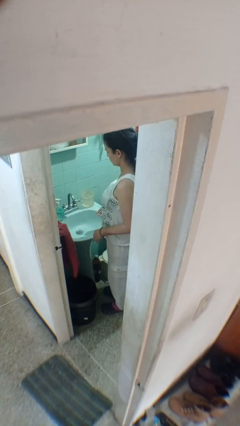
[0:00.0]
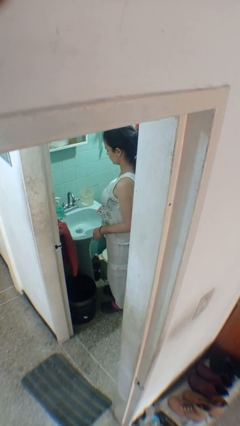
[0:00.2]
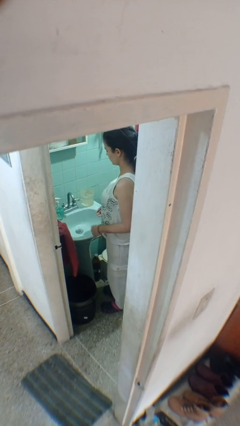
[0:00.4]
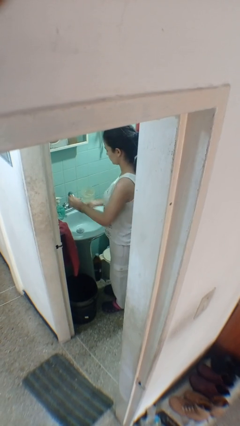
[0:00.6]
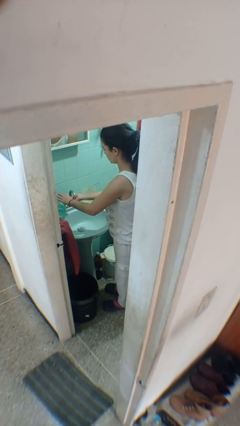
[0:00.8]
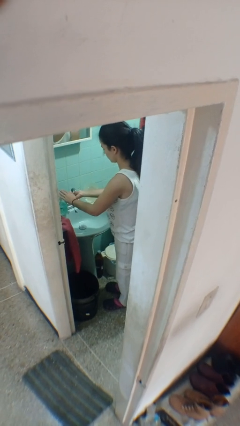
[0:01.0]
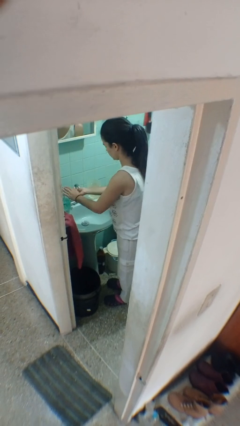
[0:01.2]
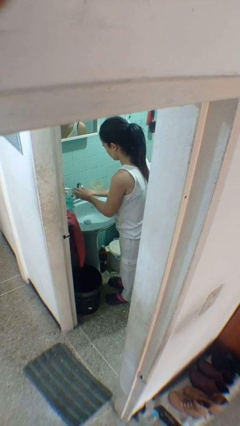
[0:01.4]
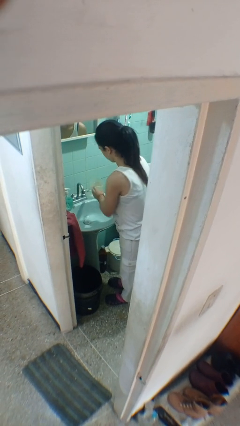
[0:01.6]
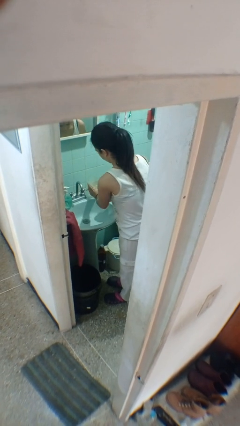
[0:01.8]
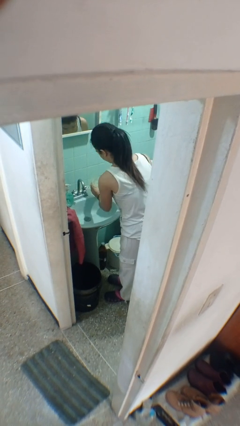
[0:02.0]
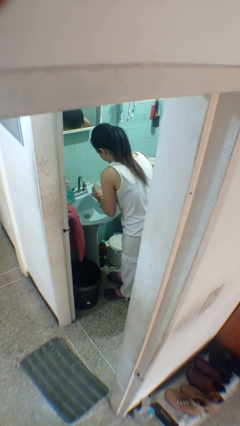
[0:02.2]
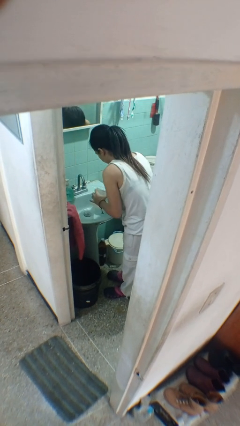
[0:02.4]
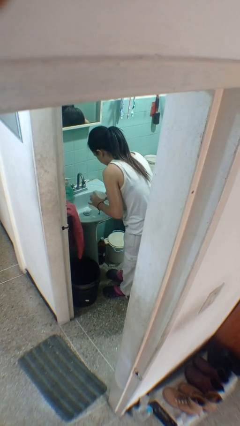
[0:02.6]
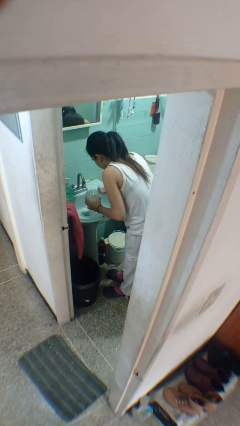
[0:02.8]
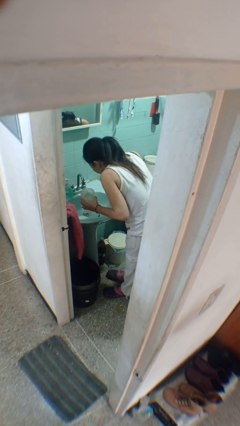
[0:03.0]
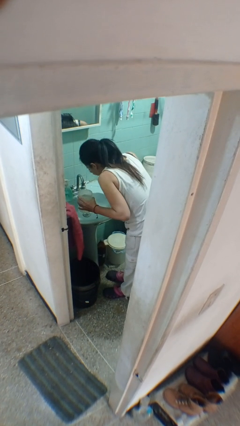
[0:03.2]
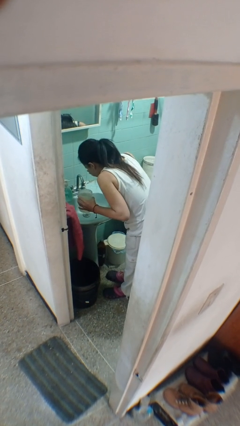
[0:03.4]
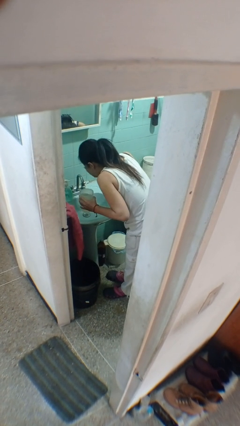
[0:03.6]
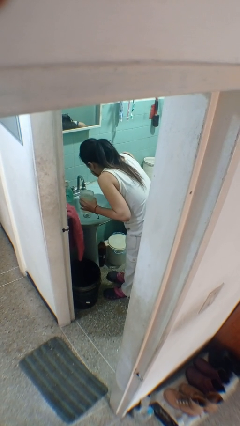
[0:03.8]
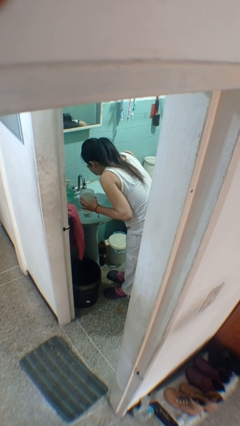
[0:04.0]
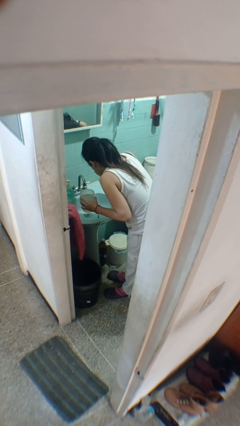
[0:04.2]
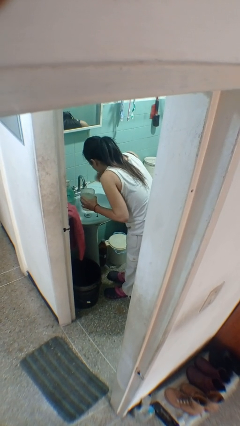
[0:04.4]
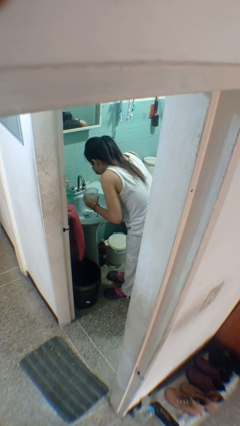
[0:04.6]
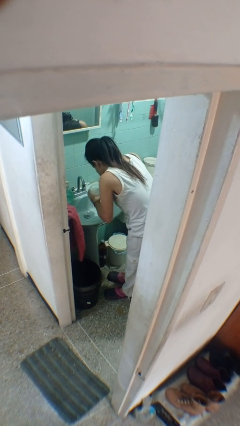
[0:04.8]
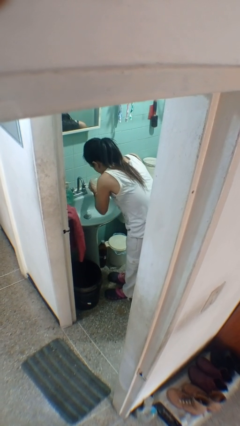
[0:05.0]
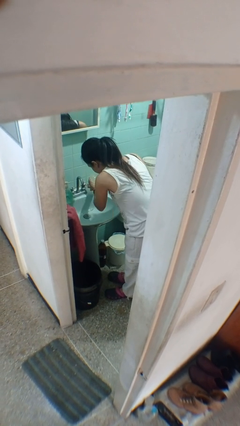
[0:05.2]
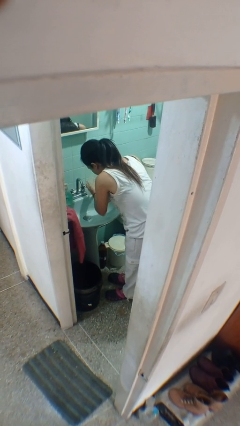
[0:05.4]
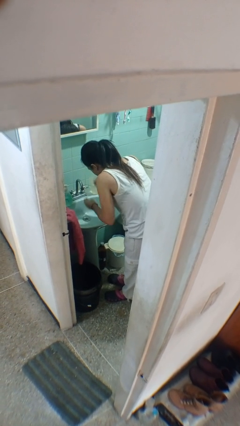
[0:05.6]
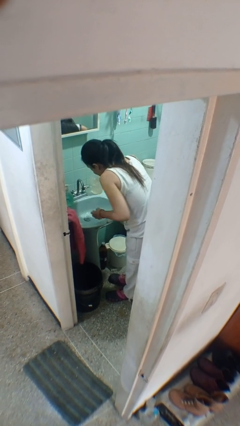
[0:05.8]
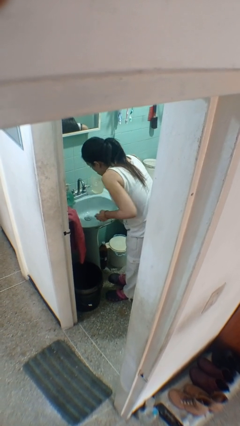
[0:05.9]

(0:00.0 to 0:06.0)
person washes face

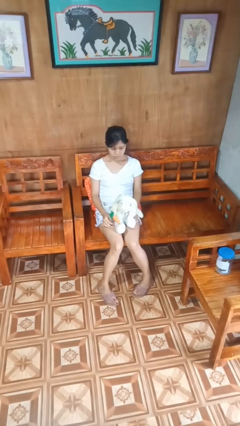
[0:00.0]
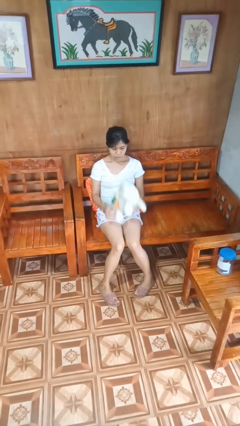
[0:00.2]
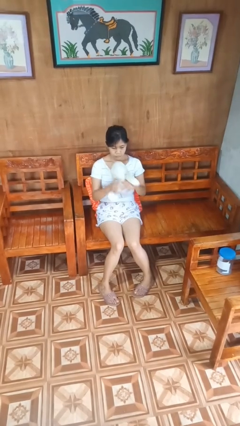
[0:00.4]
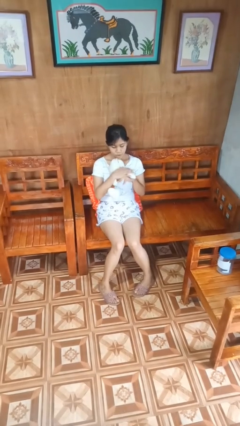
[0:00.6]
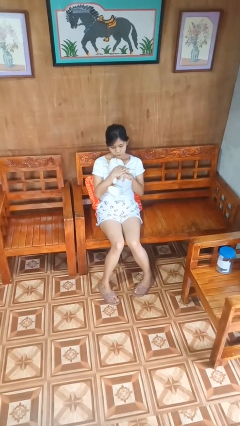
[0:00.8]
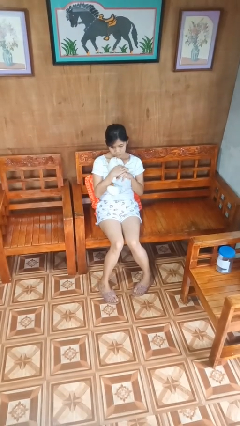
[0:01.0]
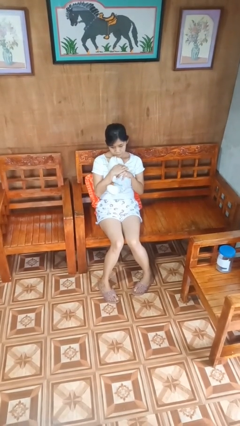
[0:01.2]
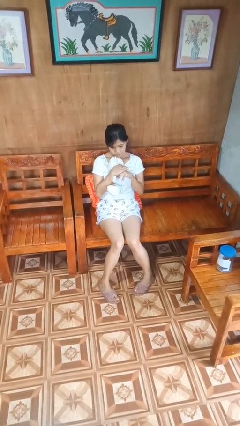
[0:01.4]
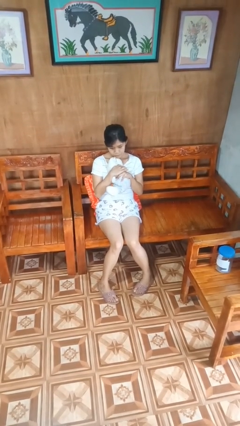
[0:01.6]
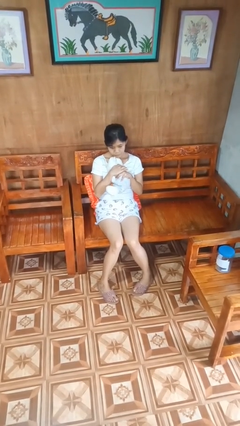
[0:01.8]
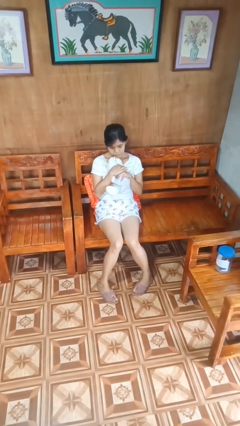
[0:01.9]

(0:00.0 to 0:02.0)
person hugs stuffed animal

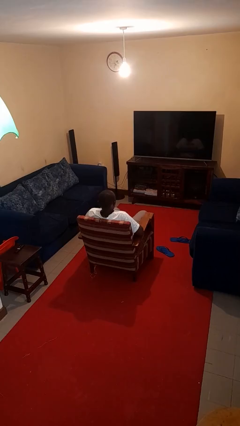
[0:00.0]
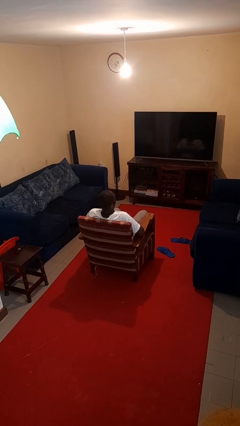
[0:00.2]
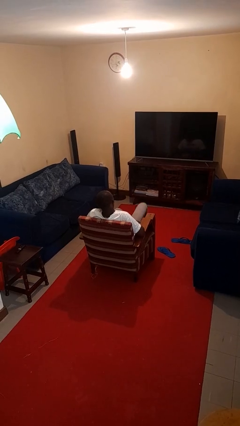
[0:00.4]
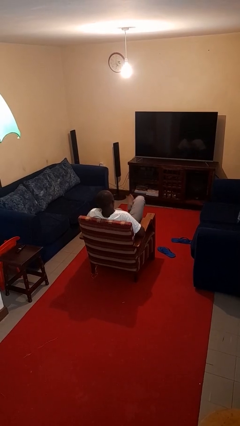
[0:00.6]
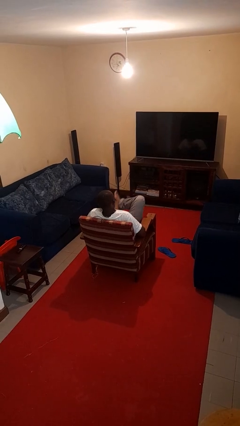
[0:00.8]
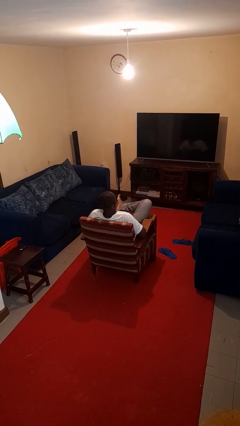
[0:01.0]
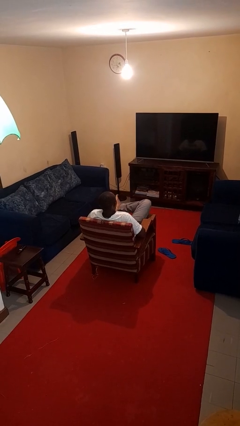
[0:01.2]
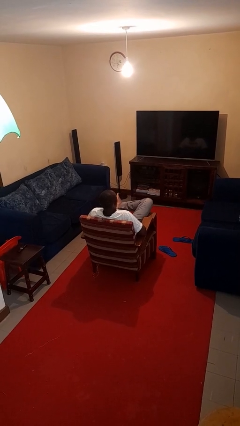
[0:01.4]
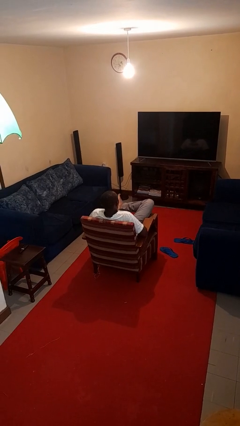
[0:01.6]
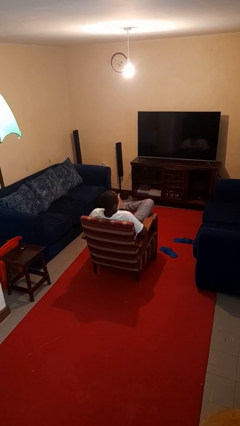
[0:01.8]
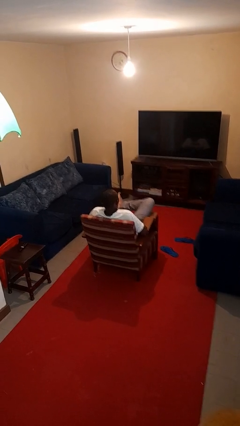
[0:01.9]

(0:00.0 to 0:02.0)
person crosses legs

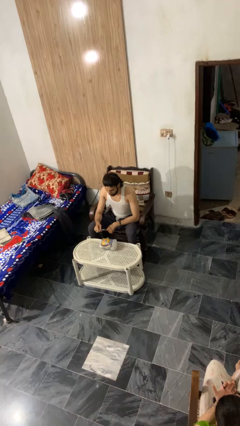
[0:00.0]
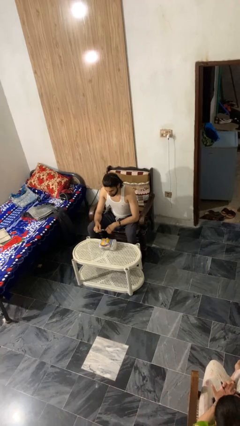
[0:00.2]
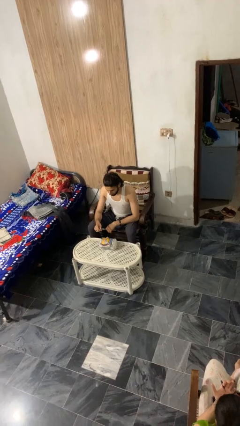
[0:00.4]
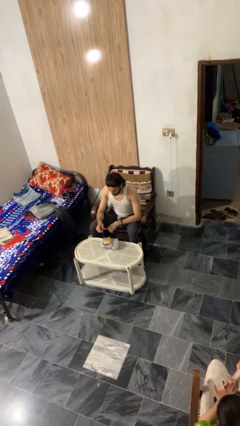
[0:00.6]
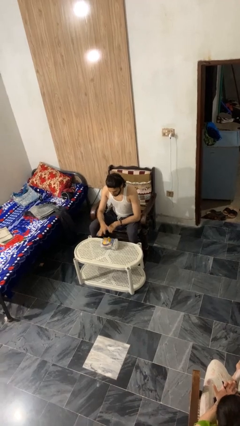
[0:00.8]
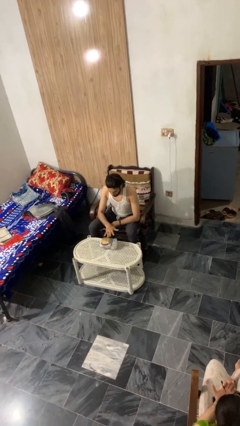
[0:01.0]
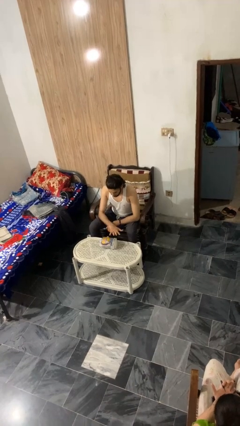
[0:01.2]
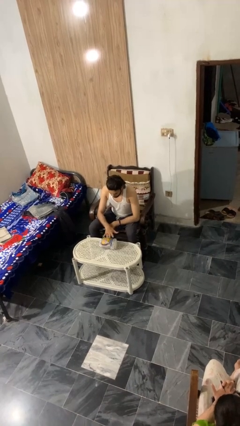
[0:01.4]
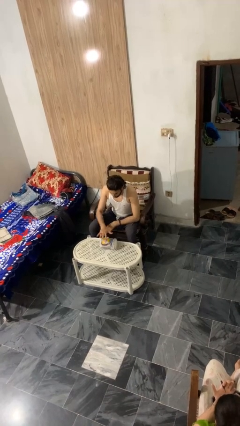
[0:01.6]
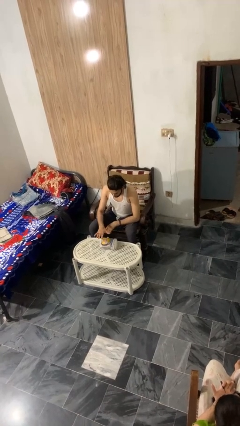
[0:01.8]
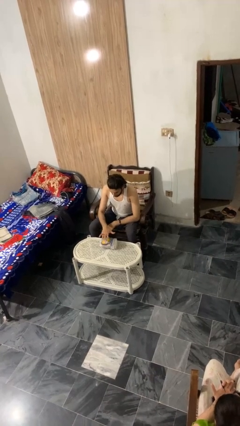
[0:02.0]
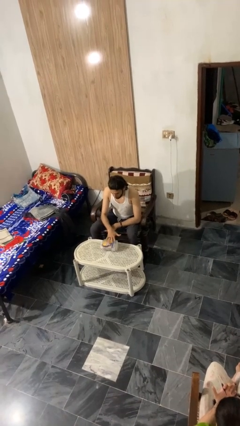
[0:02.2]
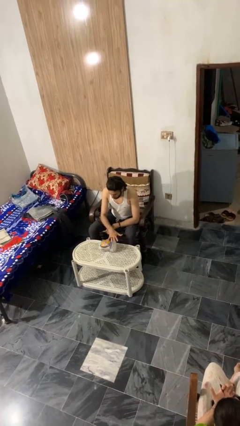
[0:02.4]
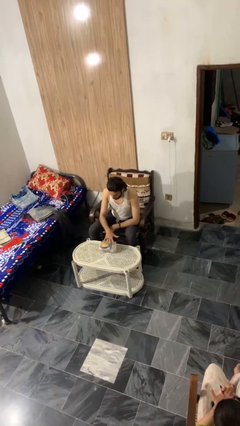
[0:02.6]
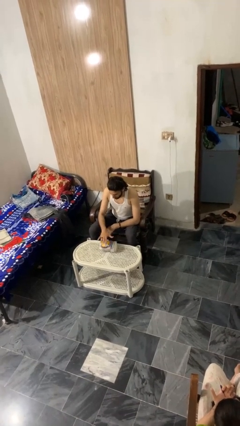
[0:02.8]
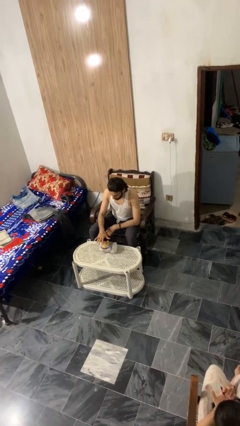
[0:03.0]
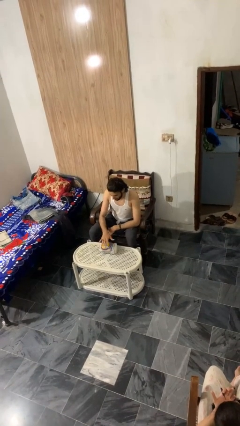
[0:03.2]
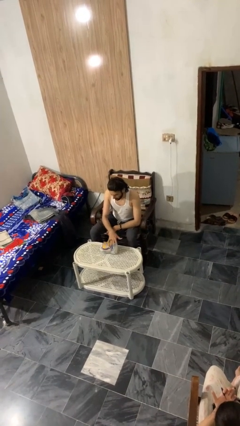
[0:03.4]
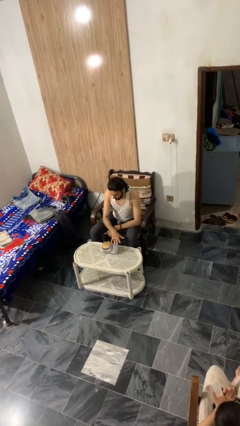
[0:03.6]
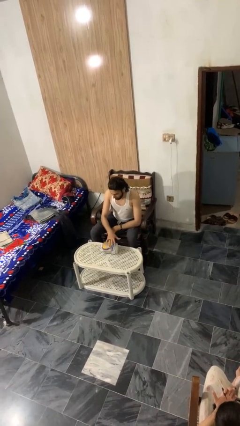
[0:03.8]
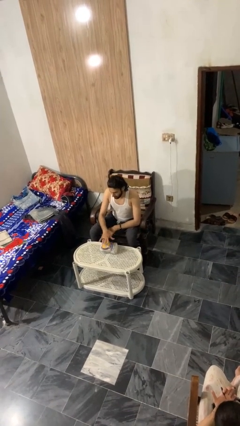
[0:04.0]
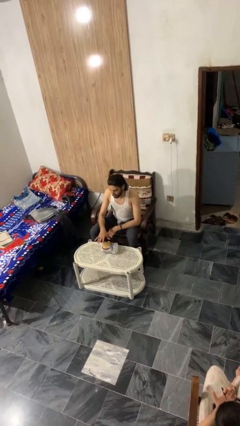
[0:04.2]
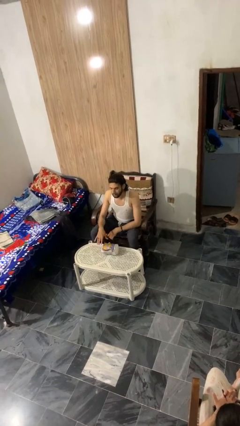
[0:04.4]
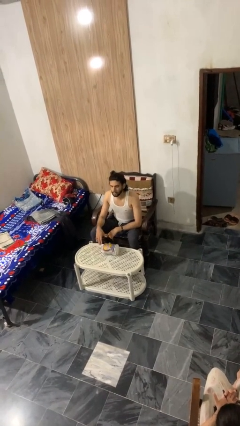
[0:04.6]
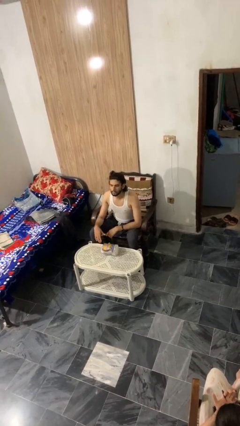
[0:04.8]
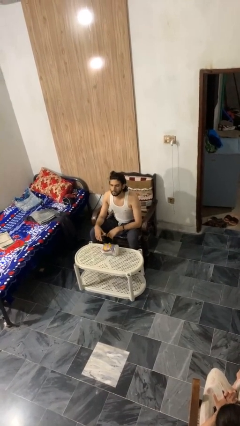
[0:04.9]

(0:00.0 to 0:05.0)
person waves hand over object

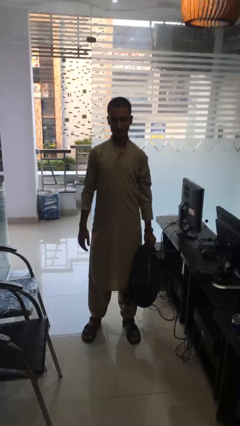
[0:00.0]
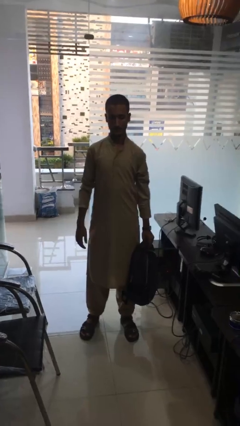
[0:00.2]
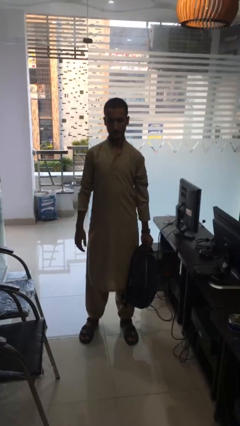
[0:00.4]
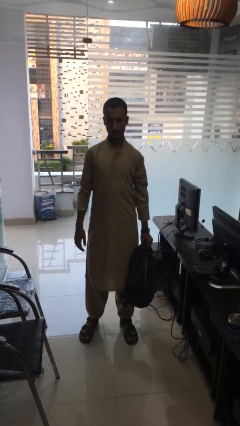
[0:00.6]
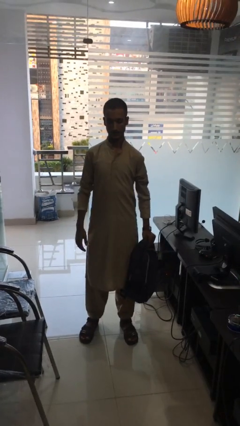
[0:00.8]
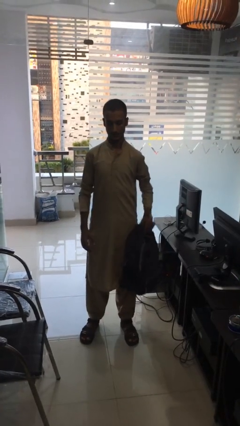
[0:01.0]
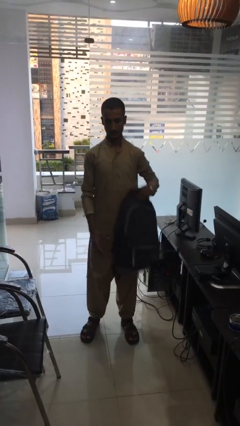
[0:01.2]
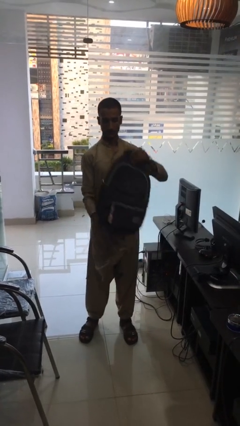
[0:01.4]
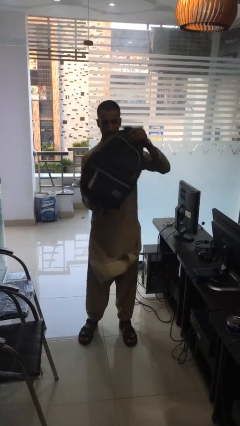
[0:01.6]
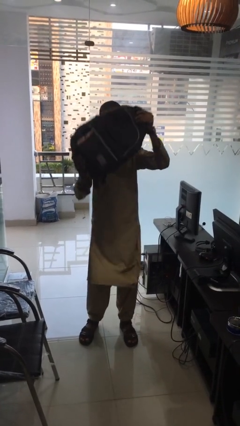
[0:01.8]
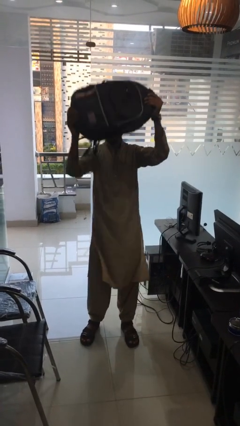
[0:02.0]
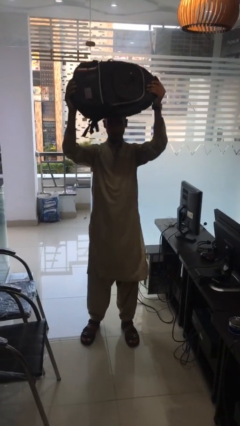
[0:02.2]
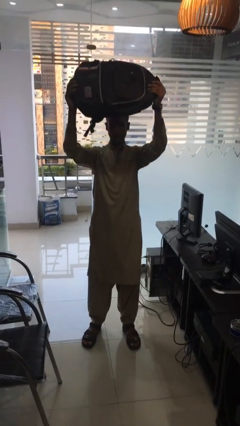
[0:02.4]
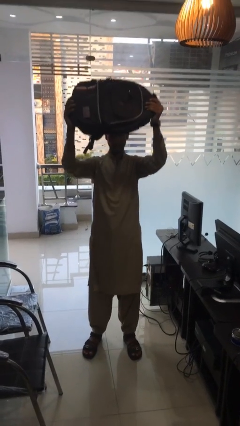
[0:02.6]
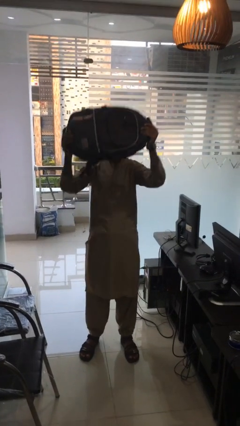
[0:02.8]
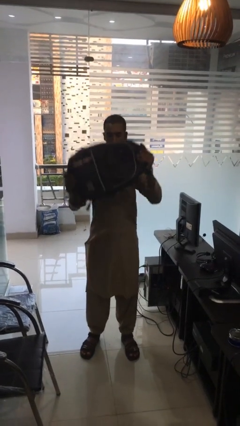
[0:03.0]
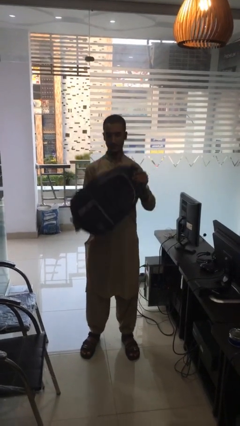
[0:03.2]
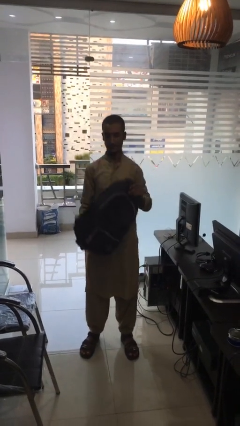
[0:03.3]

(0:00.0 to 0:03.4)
person holds object above head
